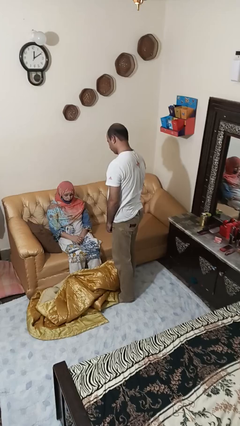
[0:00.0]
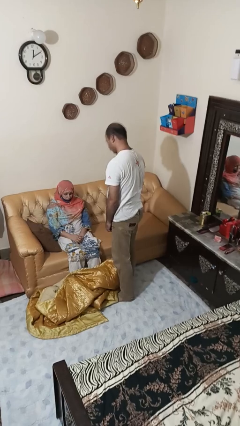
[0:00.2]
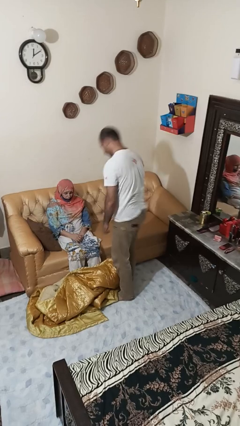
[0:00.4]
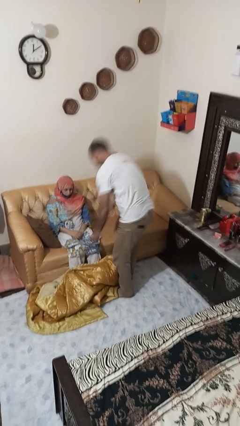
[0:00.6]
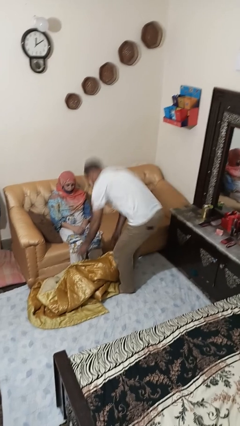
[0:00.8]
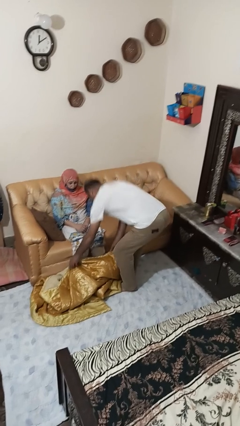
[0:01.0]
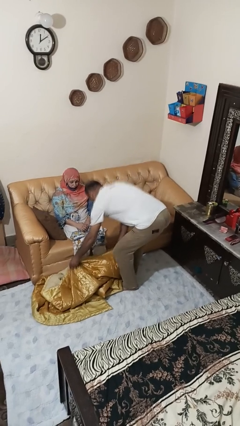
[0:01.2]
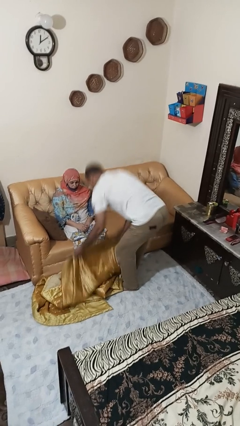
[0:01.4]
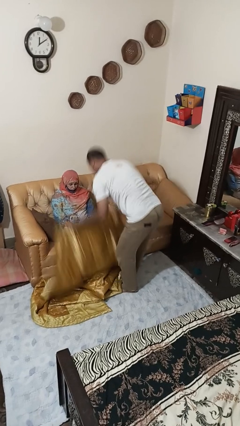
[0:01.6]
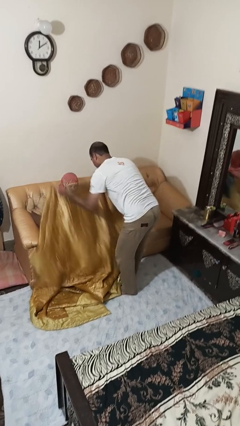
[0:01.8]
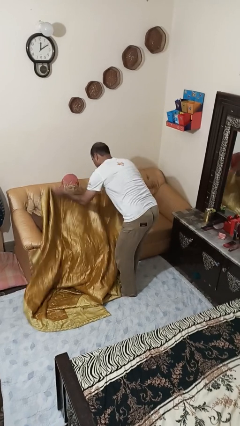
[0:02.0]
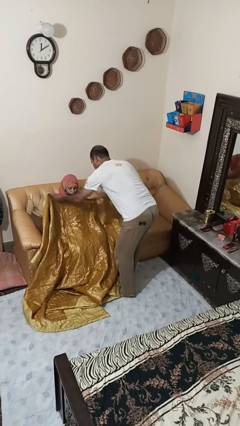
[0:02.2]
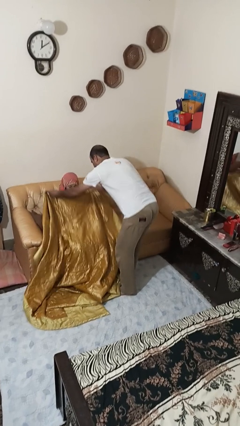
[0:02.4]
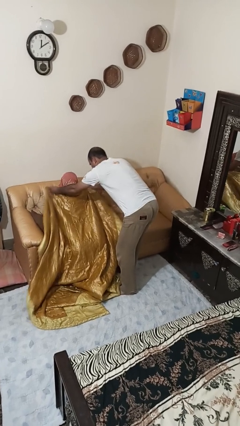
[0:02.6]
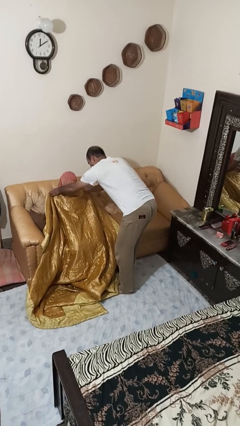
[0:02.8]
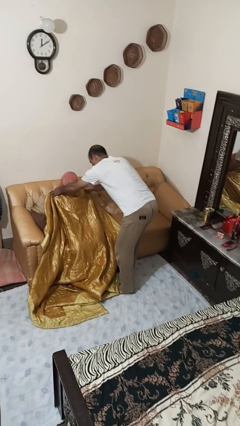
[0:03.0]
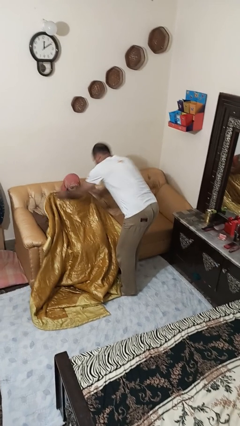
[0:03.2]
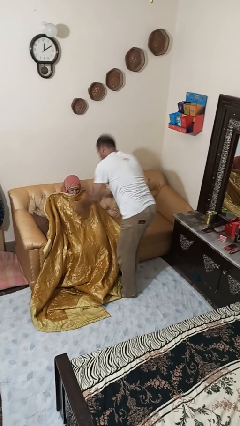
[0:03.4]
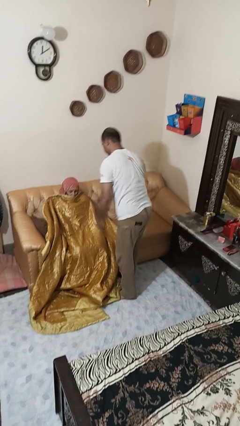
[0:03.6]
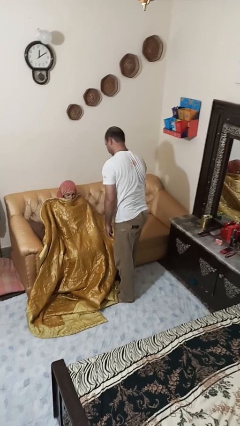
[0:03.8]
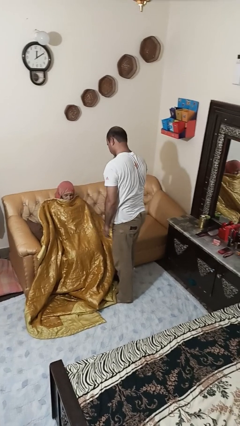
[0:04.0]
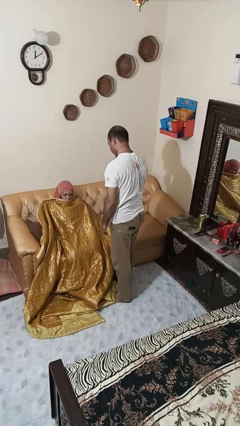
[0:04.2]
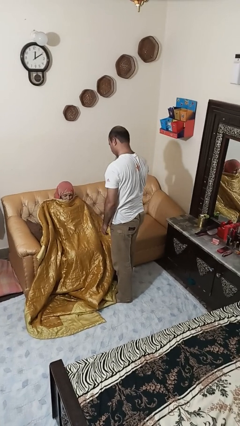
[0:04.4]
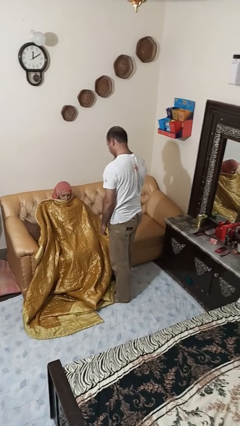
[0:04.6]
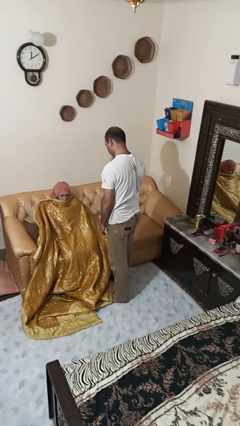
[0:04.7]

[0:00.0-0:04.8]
person covers friend with blanket

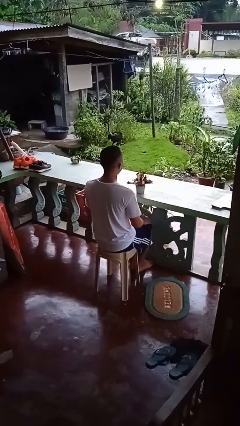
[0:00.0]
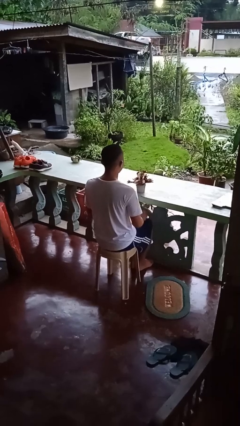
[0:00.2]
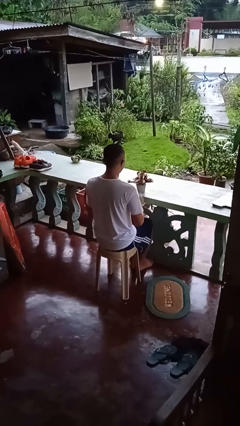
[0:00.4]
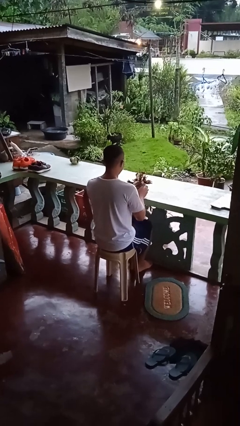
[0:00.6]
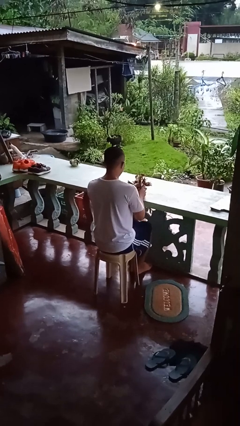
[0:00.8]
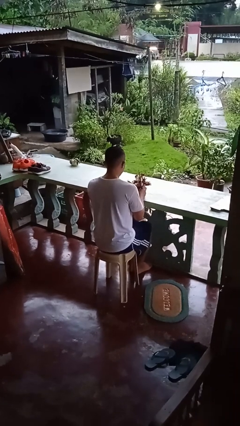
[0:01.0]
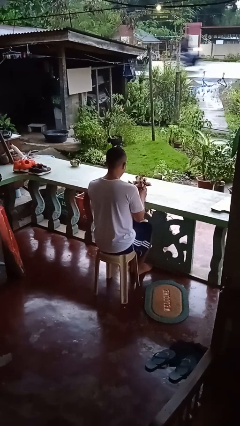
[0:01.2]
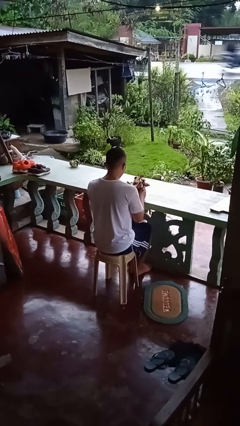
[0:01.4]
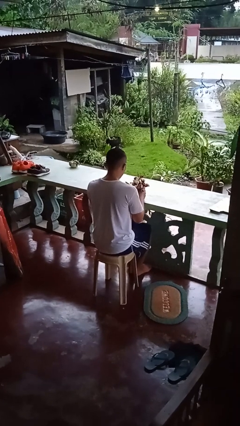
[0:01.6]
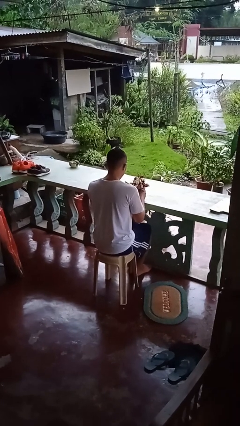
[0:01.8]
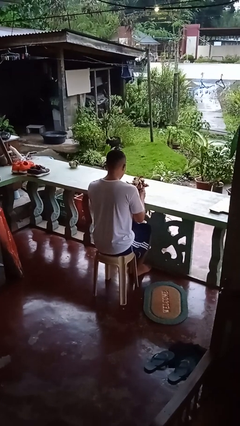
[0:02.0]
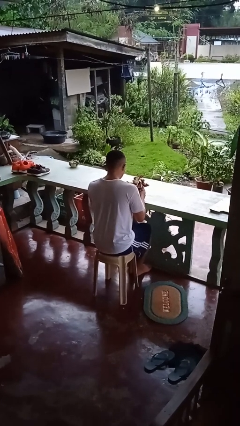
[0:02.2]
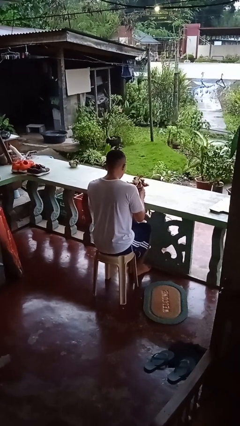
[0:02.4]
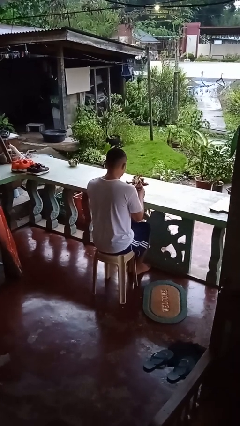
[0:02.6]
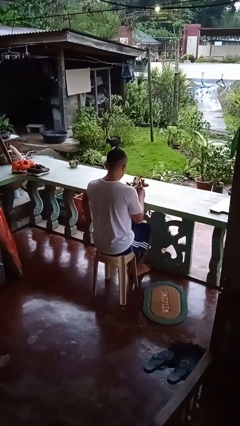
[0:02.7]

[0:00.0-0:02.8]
person arranges flowers in vase

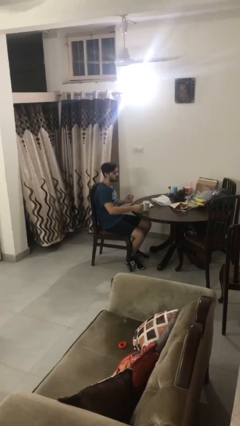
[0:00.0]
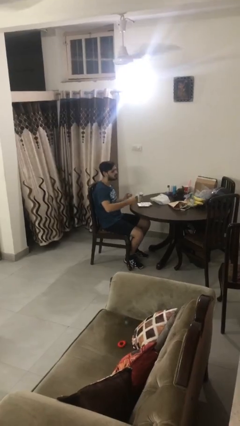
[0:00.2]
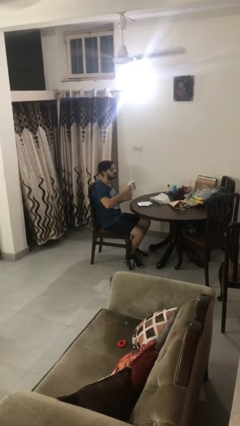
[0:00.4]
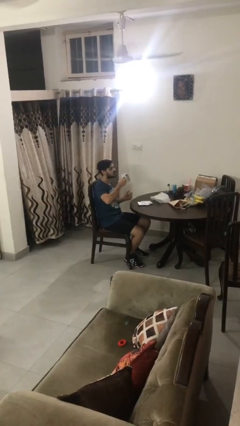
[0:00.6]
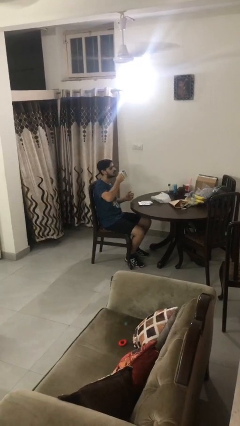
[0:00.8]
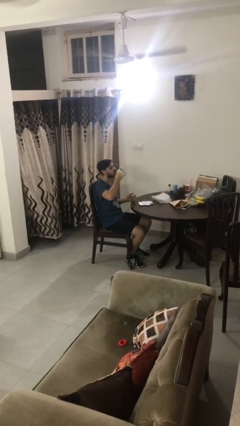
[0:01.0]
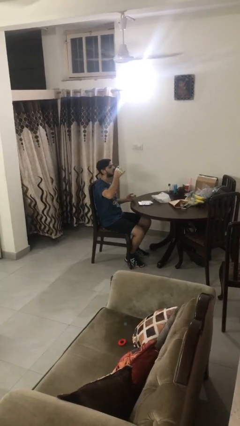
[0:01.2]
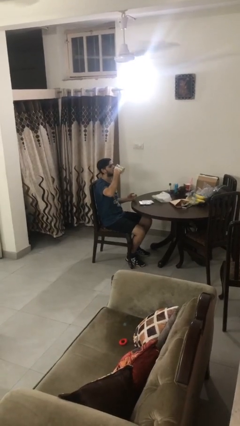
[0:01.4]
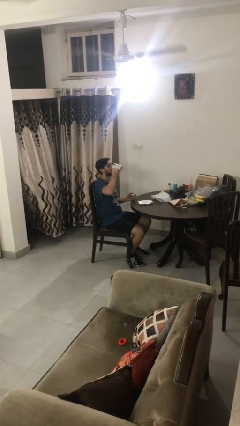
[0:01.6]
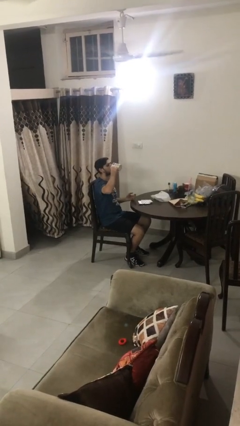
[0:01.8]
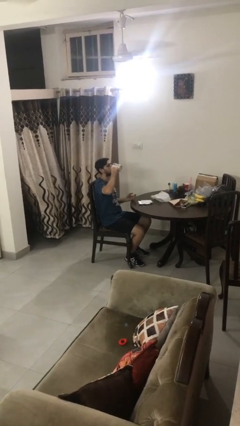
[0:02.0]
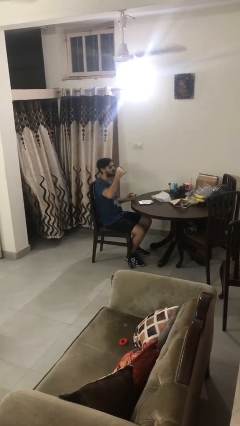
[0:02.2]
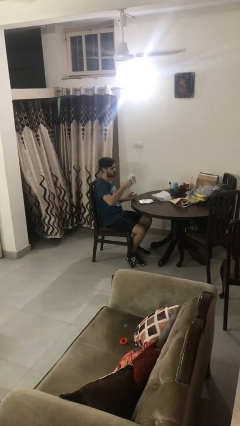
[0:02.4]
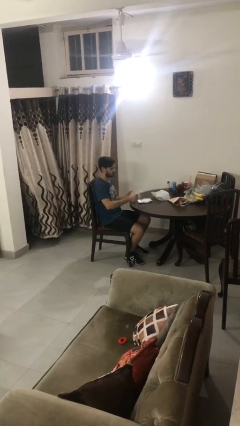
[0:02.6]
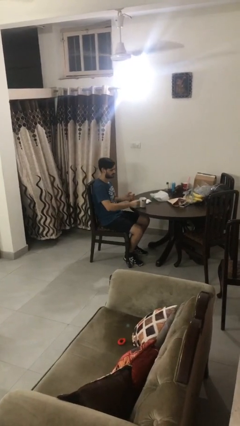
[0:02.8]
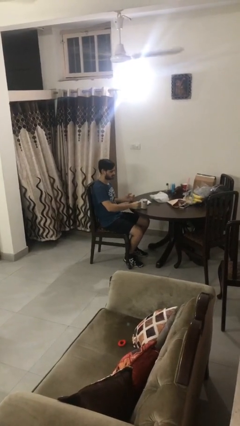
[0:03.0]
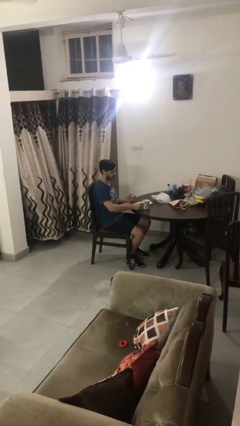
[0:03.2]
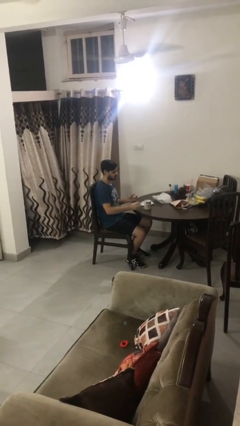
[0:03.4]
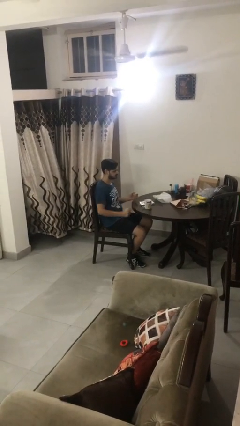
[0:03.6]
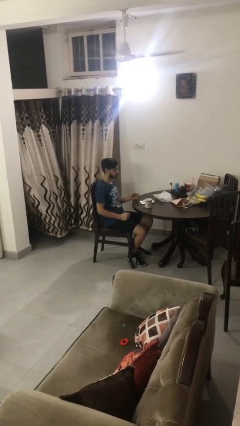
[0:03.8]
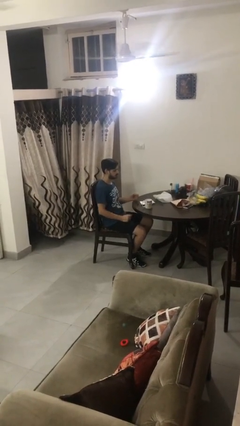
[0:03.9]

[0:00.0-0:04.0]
person drinks from cup

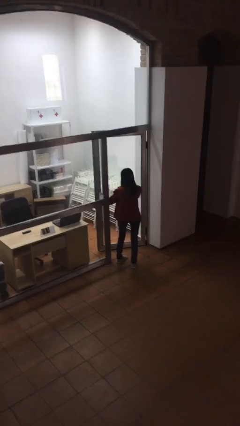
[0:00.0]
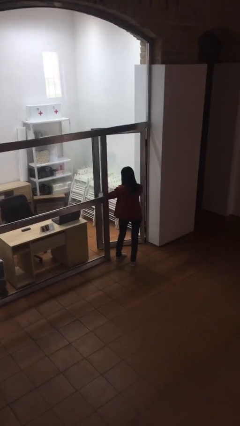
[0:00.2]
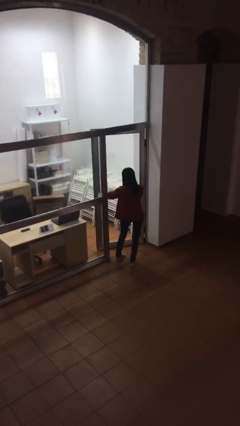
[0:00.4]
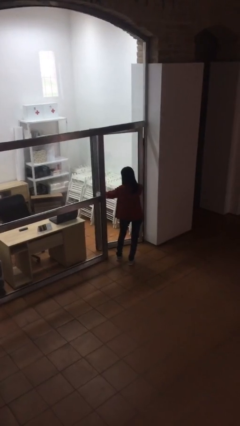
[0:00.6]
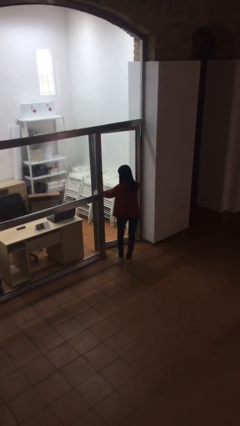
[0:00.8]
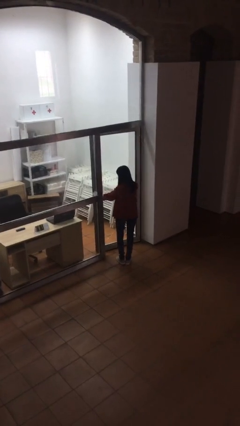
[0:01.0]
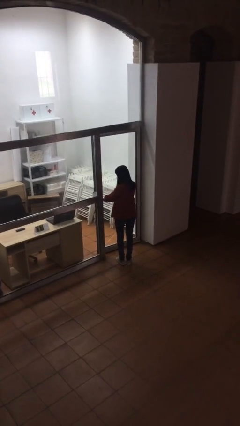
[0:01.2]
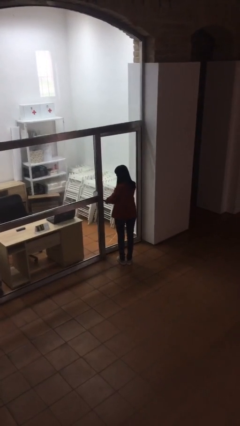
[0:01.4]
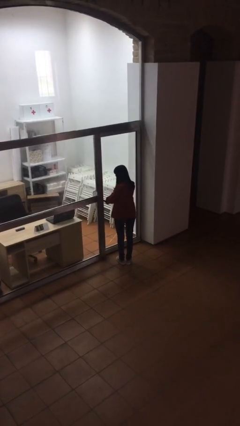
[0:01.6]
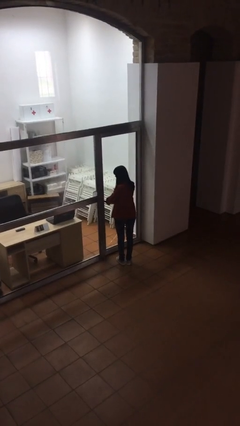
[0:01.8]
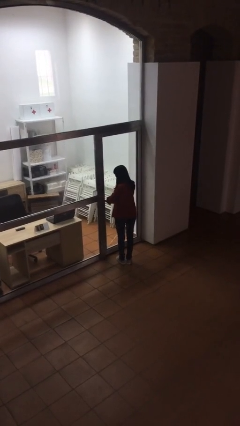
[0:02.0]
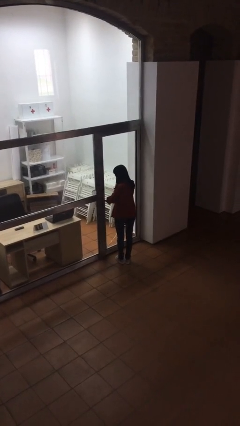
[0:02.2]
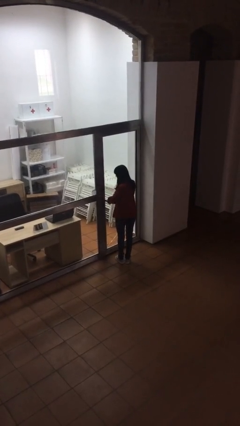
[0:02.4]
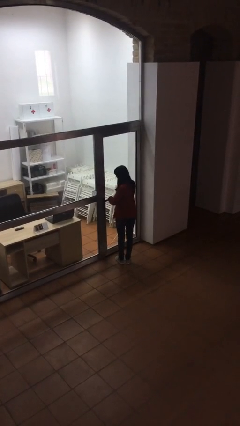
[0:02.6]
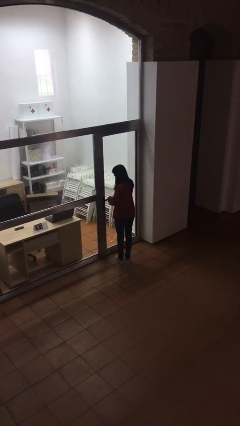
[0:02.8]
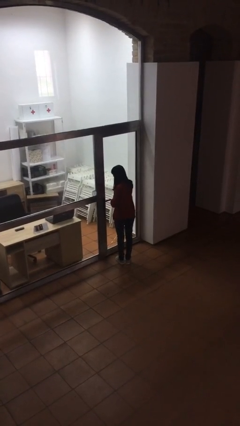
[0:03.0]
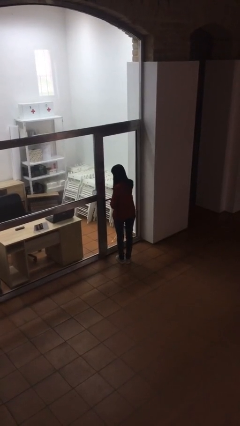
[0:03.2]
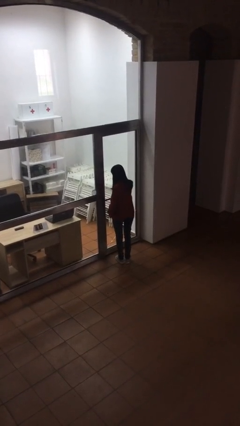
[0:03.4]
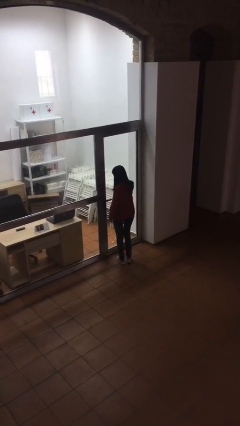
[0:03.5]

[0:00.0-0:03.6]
person closes facility door

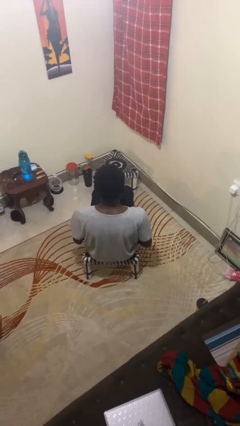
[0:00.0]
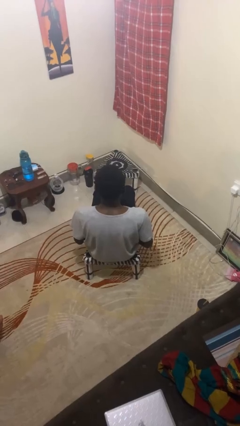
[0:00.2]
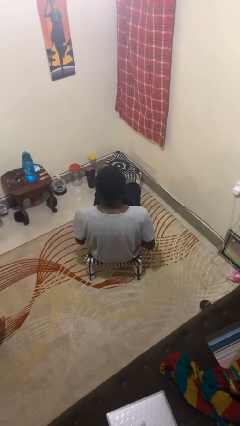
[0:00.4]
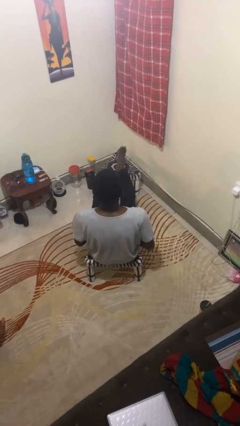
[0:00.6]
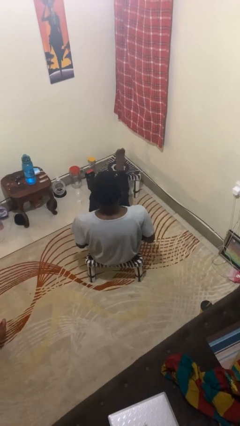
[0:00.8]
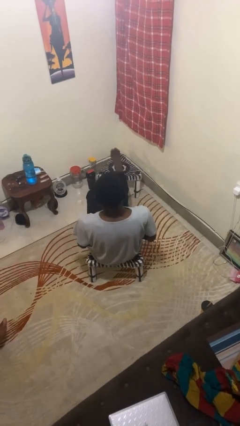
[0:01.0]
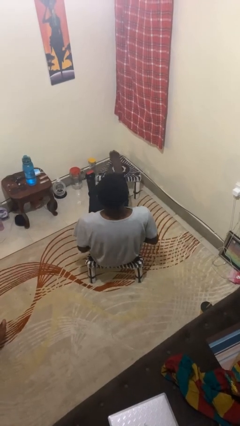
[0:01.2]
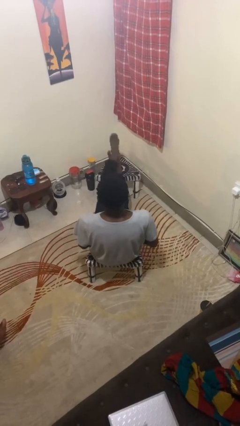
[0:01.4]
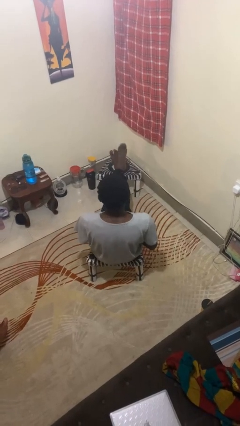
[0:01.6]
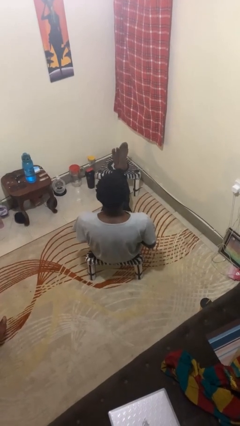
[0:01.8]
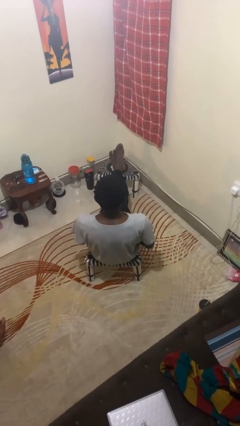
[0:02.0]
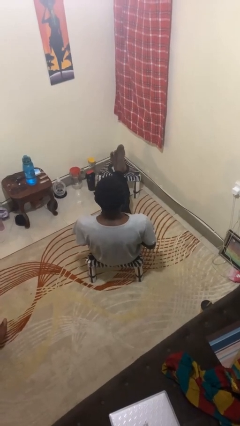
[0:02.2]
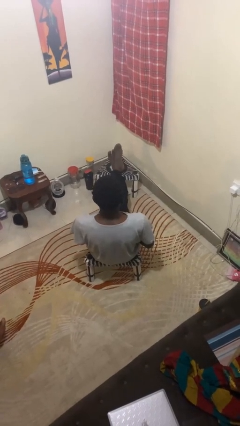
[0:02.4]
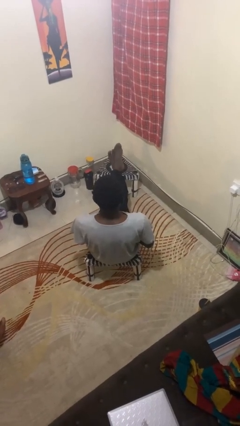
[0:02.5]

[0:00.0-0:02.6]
person puts feet up
